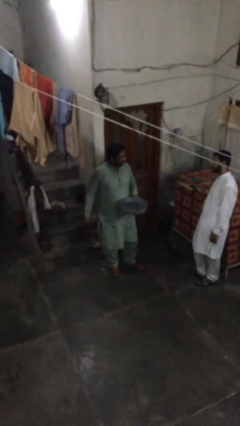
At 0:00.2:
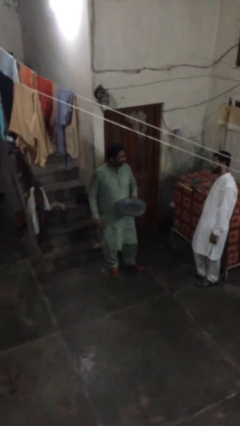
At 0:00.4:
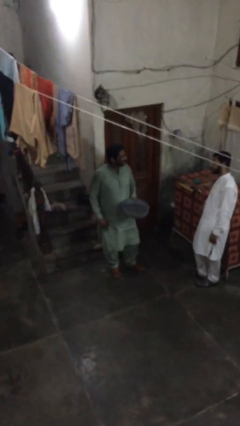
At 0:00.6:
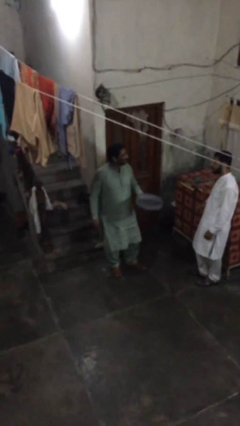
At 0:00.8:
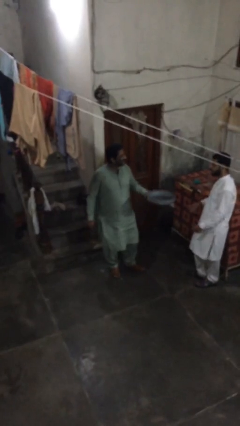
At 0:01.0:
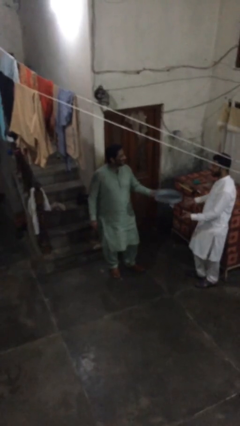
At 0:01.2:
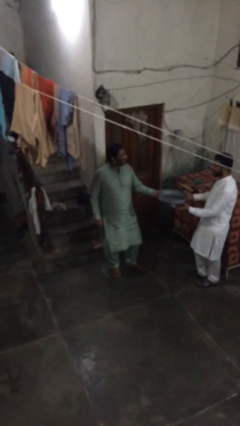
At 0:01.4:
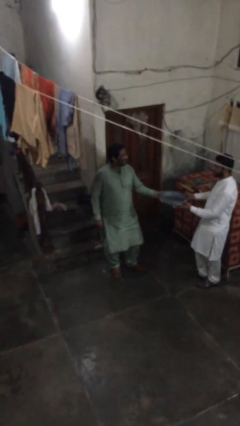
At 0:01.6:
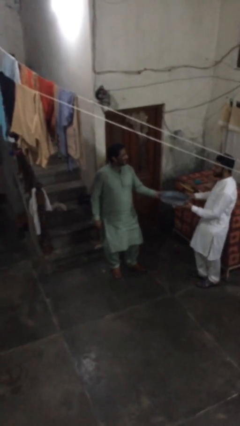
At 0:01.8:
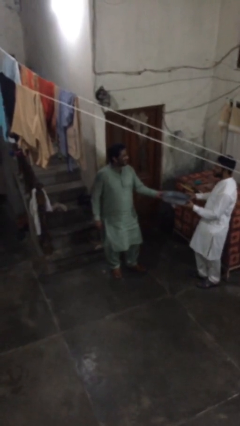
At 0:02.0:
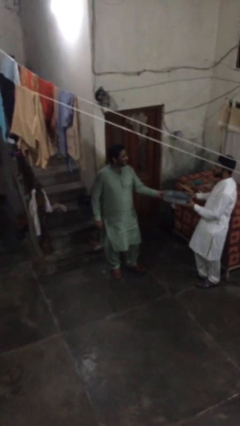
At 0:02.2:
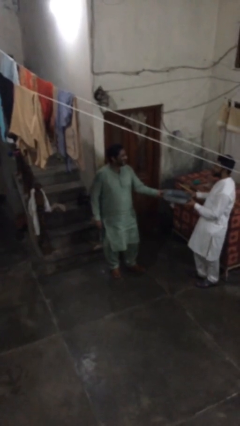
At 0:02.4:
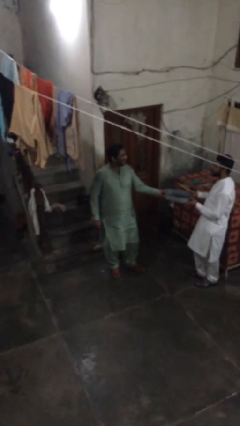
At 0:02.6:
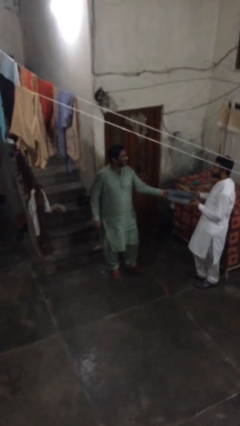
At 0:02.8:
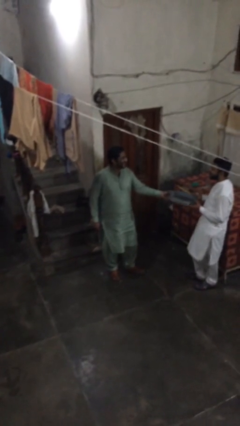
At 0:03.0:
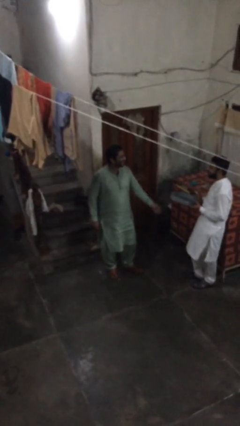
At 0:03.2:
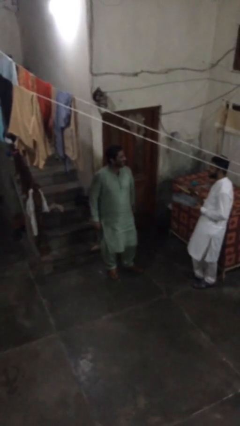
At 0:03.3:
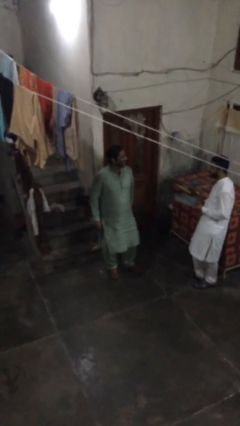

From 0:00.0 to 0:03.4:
person transfers object to person

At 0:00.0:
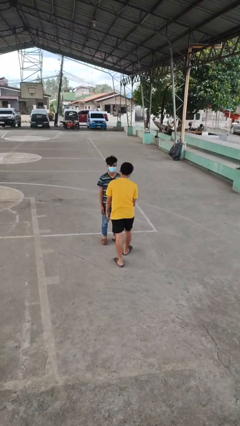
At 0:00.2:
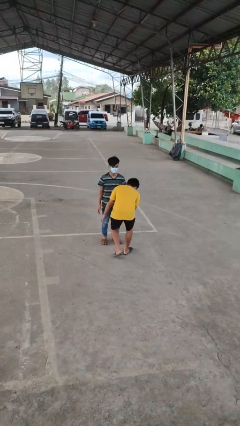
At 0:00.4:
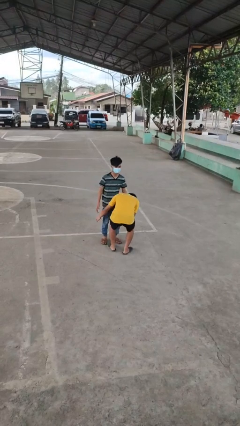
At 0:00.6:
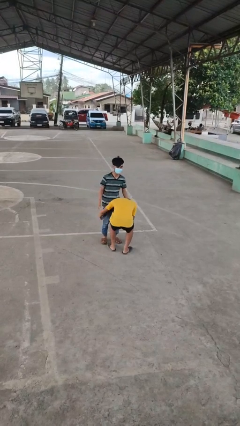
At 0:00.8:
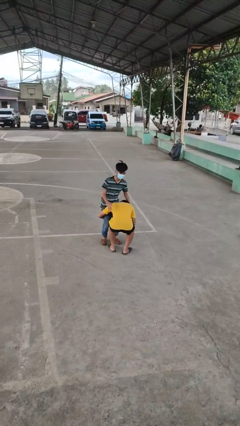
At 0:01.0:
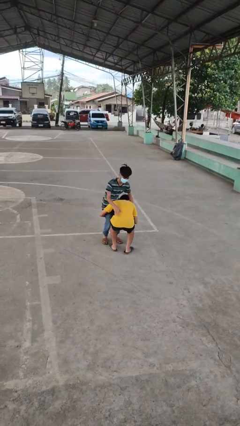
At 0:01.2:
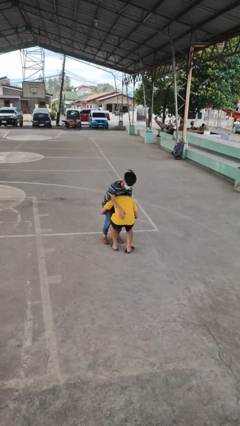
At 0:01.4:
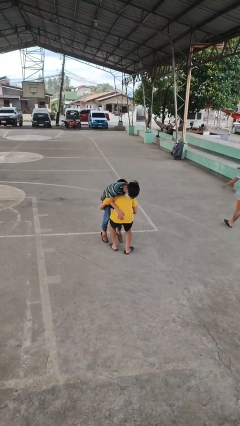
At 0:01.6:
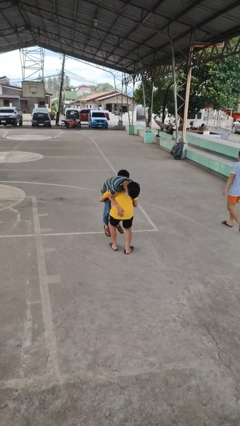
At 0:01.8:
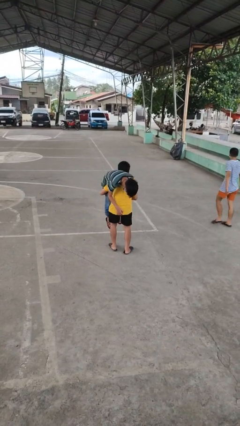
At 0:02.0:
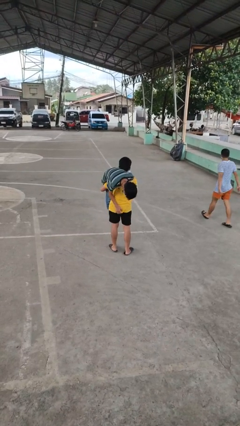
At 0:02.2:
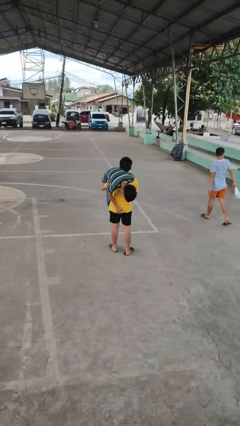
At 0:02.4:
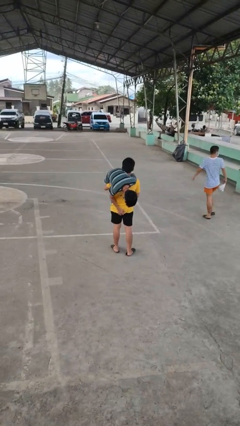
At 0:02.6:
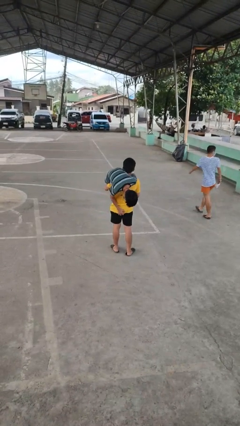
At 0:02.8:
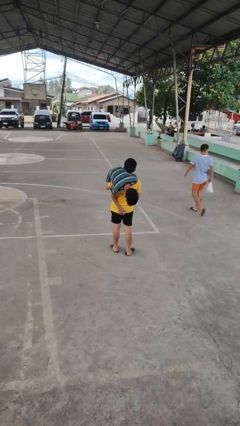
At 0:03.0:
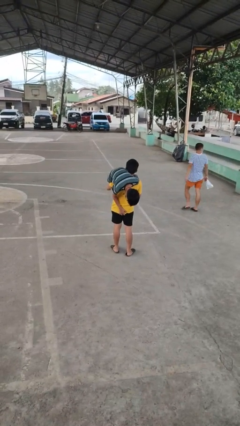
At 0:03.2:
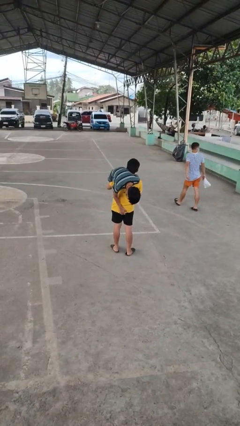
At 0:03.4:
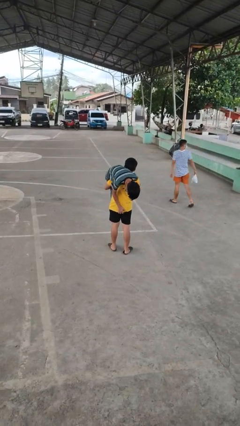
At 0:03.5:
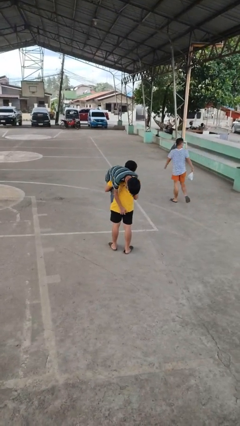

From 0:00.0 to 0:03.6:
person carries person over shoulder

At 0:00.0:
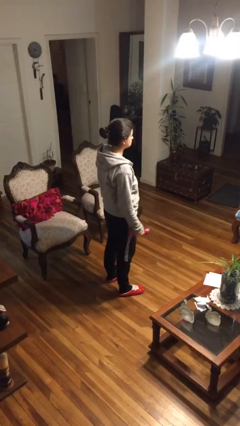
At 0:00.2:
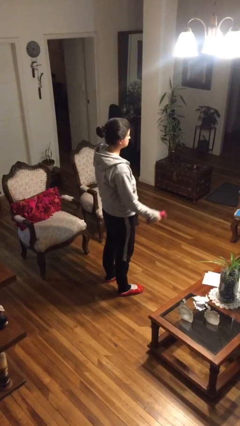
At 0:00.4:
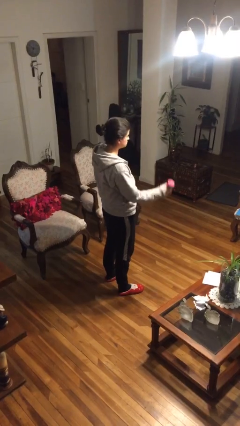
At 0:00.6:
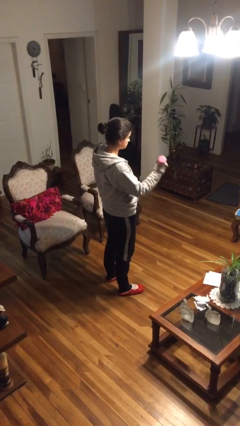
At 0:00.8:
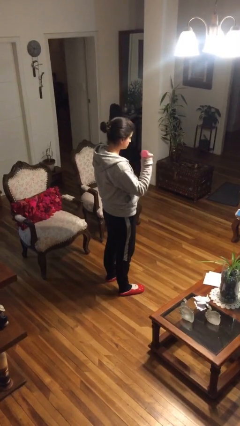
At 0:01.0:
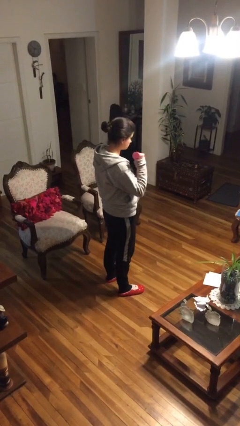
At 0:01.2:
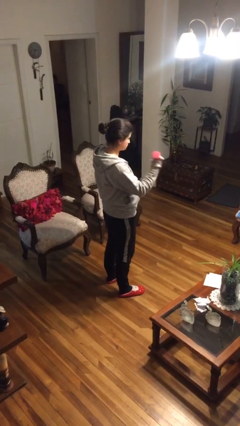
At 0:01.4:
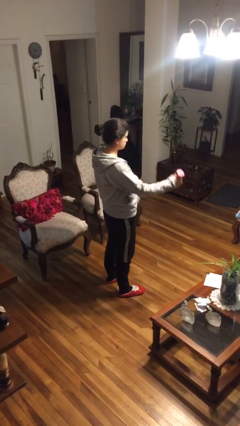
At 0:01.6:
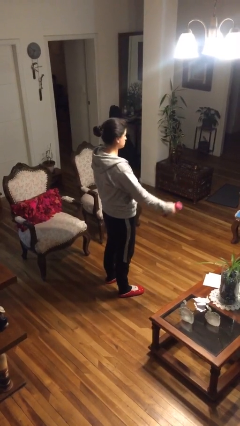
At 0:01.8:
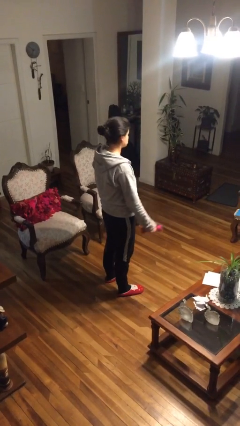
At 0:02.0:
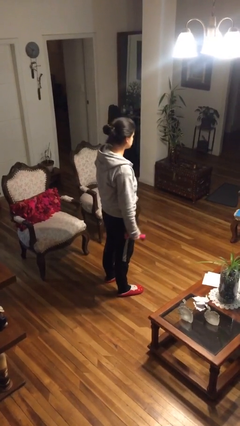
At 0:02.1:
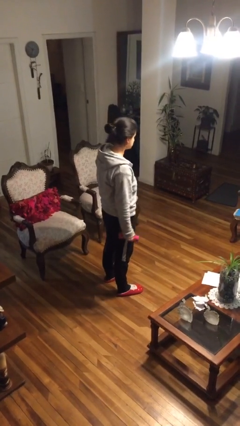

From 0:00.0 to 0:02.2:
person lifts dumbbells

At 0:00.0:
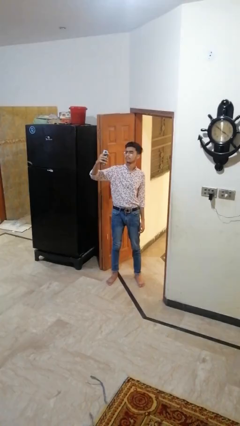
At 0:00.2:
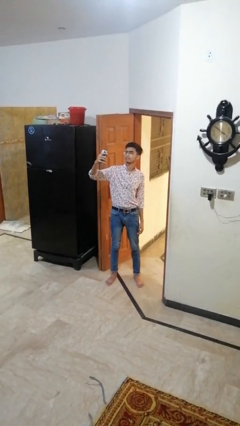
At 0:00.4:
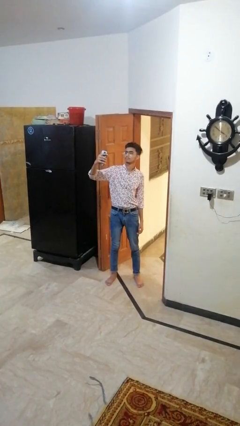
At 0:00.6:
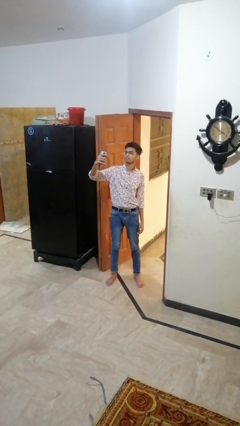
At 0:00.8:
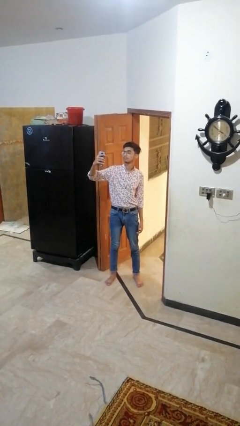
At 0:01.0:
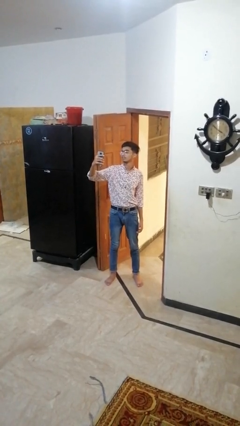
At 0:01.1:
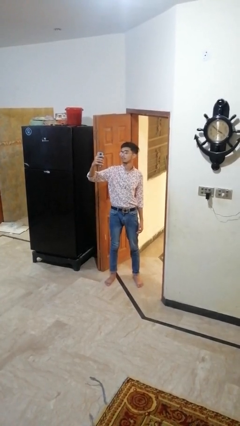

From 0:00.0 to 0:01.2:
person takes selfie

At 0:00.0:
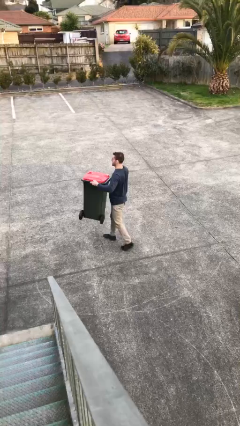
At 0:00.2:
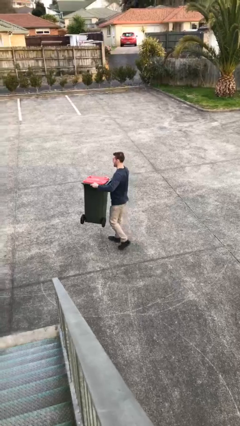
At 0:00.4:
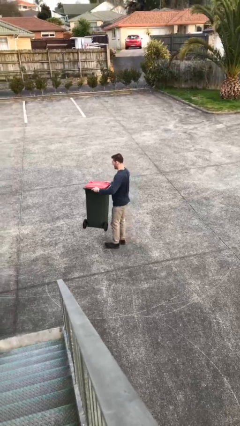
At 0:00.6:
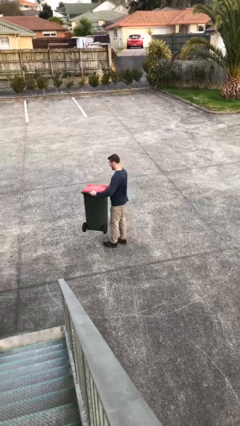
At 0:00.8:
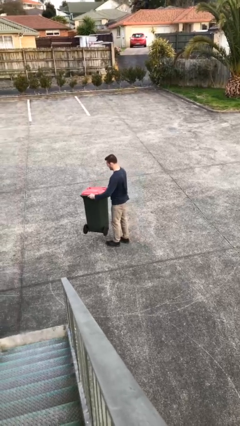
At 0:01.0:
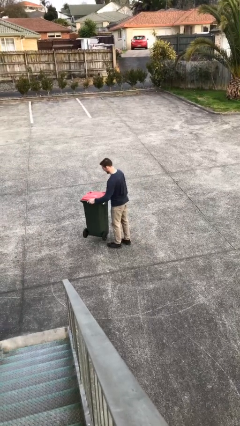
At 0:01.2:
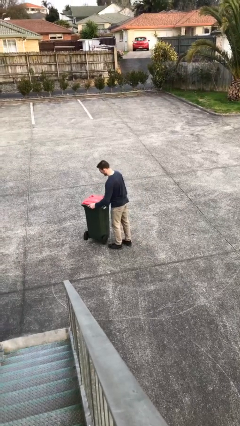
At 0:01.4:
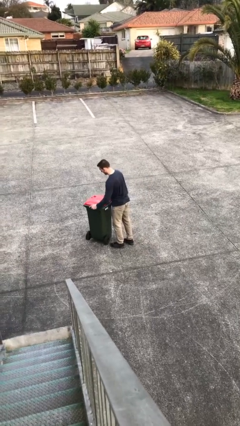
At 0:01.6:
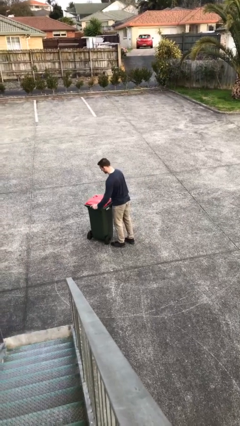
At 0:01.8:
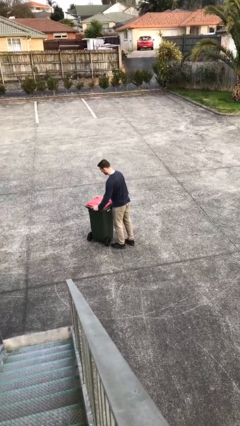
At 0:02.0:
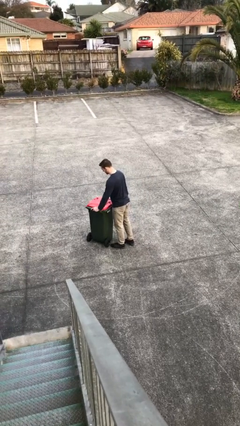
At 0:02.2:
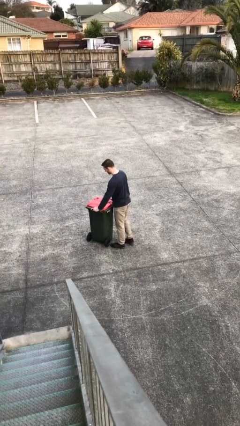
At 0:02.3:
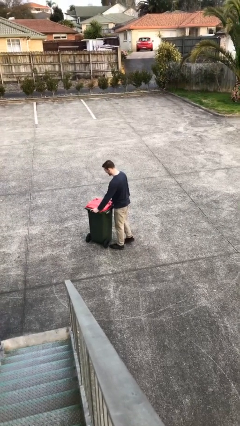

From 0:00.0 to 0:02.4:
person puts down object on floor

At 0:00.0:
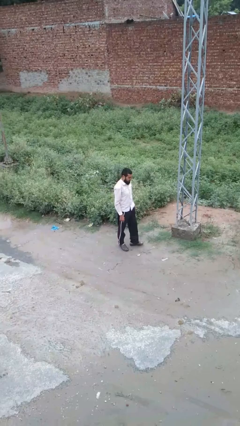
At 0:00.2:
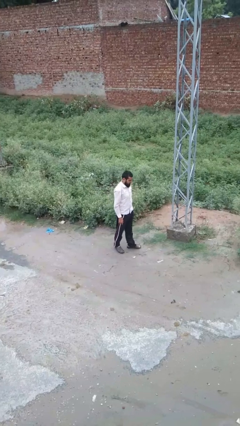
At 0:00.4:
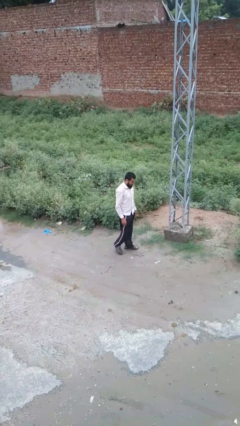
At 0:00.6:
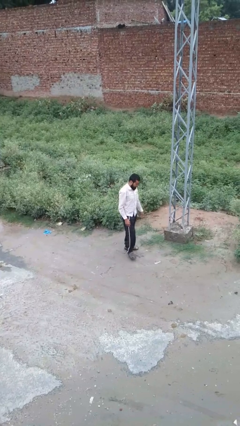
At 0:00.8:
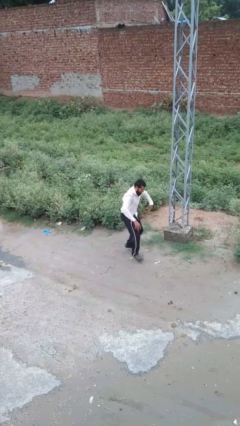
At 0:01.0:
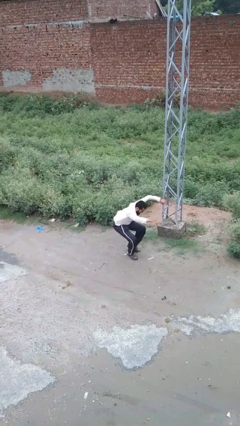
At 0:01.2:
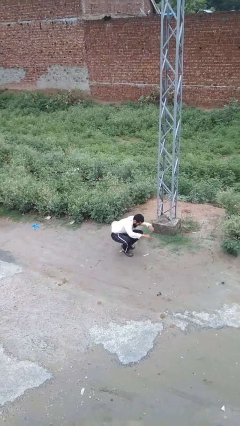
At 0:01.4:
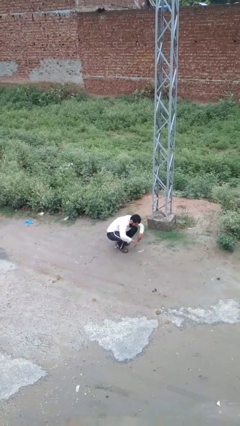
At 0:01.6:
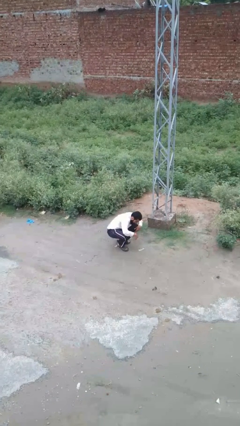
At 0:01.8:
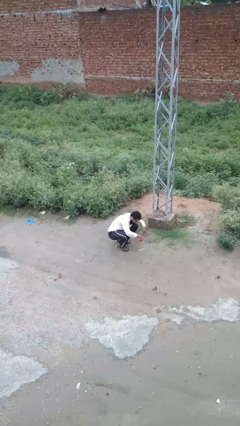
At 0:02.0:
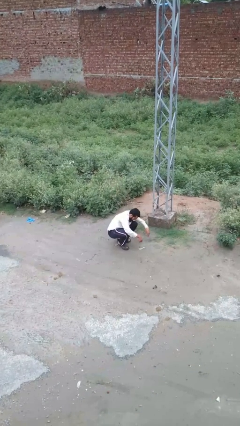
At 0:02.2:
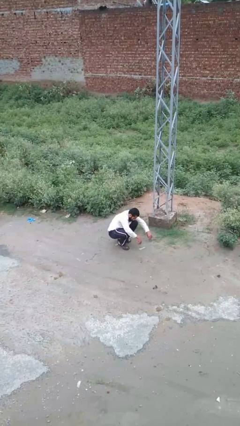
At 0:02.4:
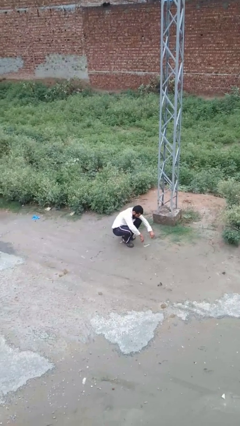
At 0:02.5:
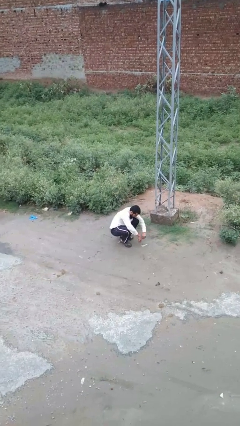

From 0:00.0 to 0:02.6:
person trips on object on floor

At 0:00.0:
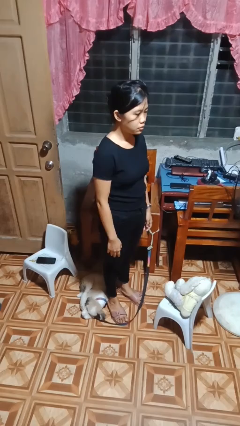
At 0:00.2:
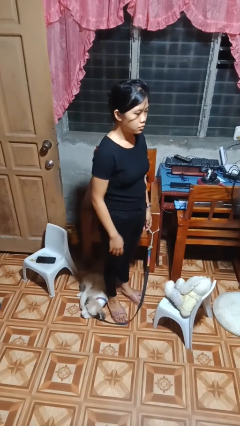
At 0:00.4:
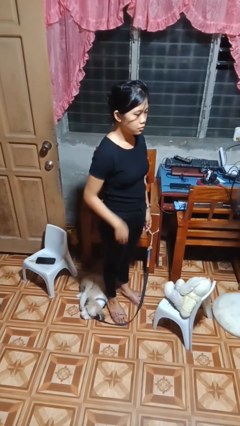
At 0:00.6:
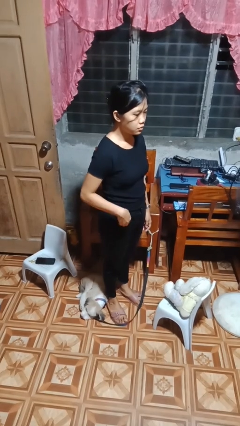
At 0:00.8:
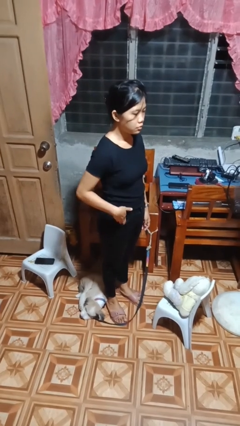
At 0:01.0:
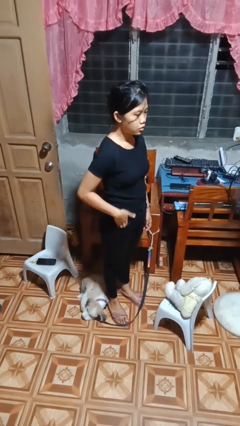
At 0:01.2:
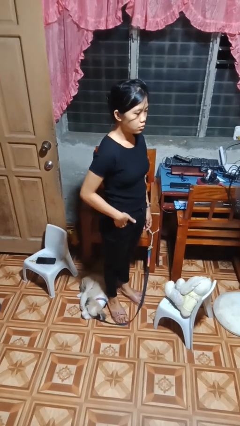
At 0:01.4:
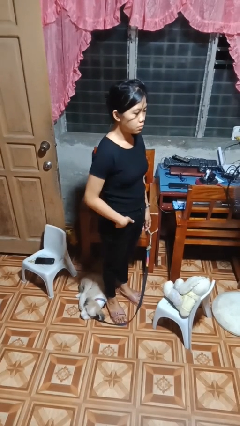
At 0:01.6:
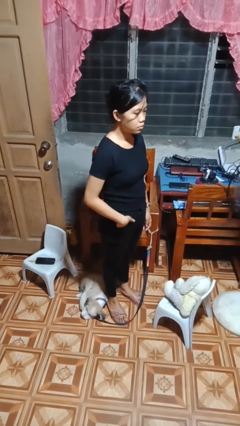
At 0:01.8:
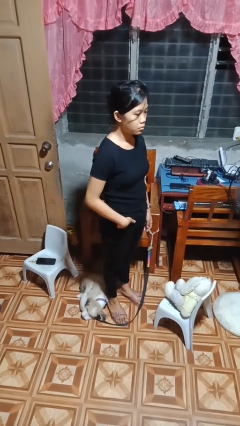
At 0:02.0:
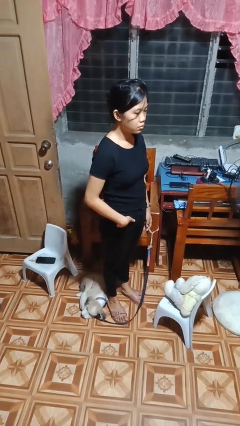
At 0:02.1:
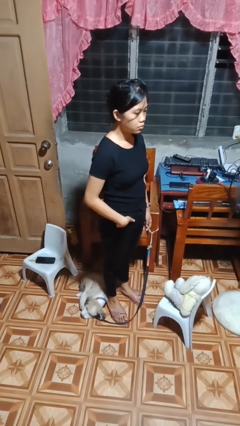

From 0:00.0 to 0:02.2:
person puts hands in back pockets
